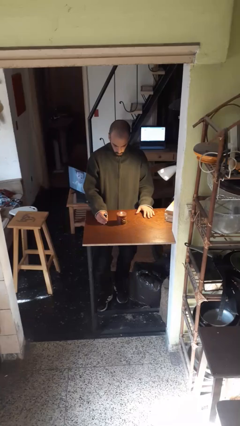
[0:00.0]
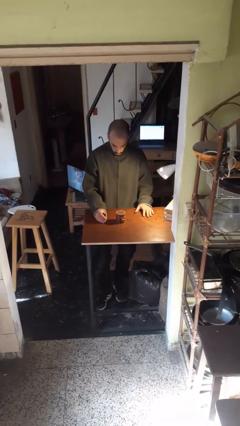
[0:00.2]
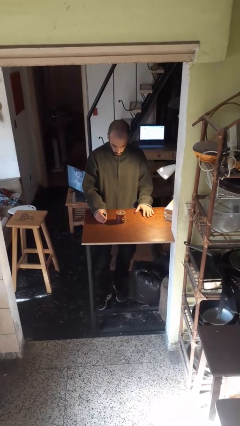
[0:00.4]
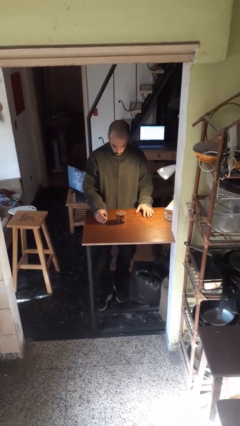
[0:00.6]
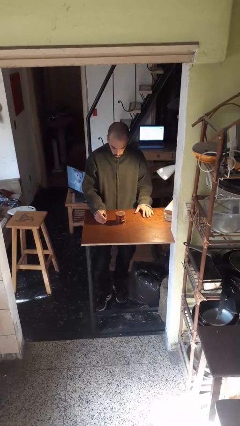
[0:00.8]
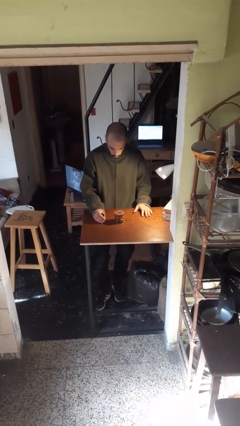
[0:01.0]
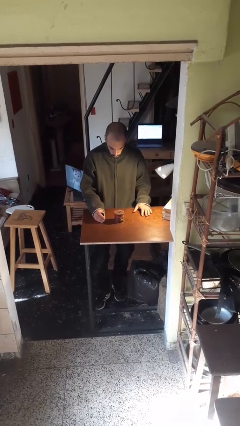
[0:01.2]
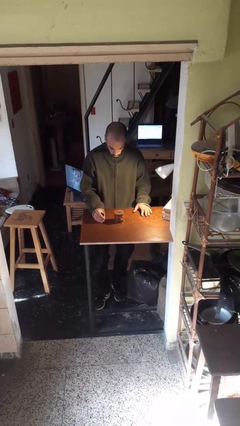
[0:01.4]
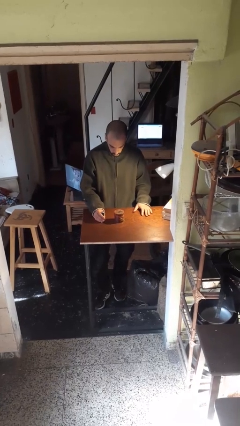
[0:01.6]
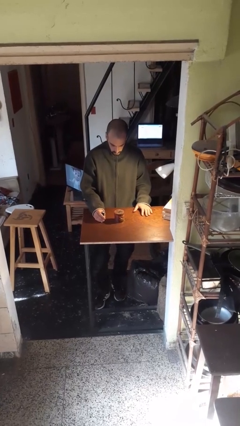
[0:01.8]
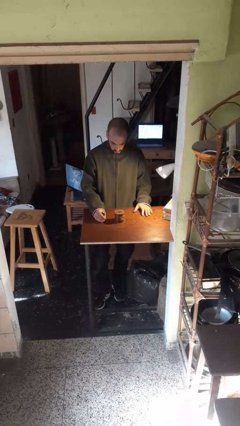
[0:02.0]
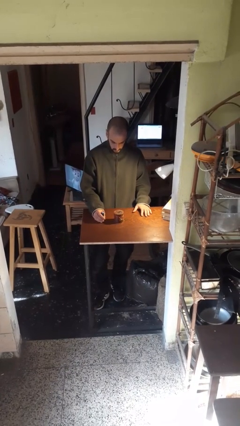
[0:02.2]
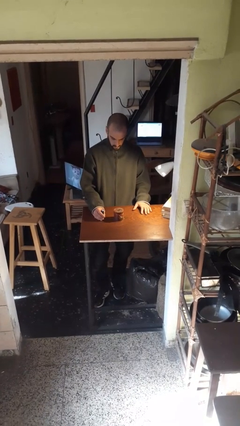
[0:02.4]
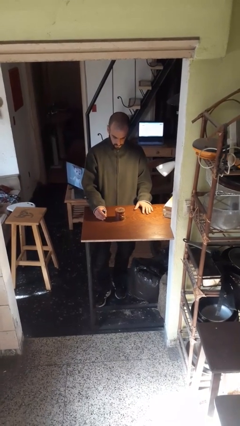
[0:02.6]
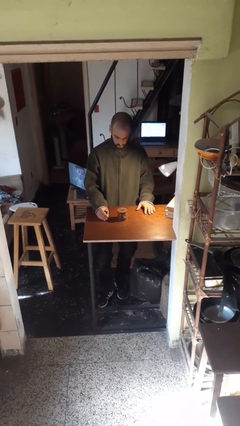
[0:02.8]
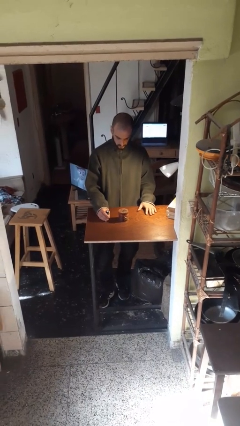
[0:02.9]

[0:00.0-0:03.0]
person extinguishes candle

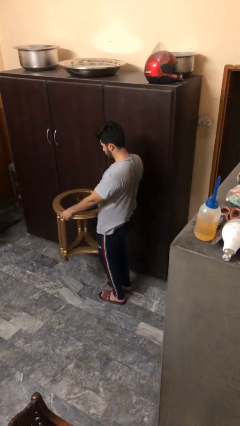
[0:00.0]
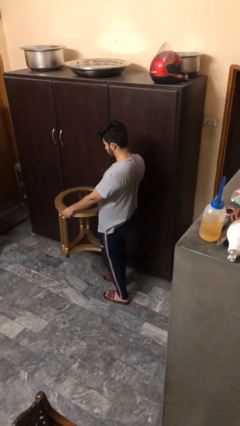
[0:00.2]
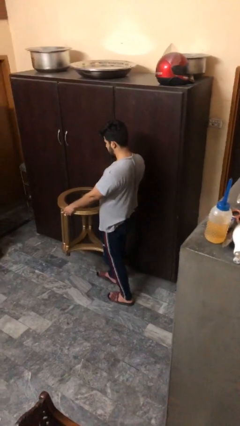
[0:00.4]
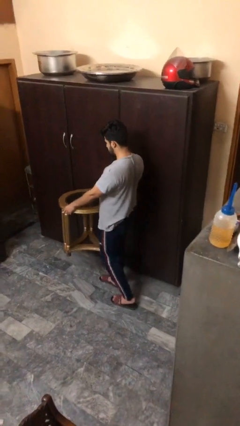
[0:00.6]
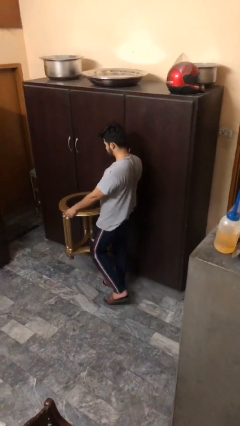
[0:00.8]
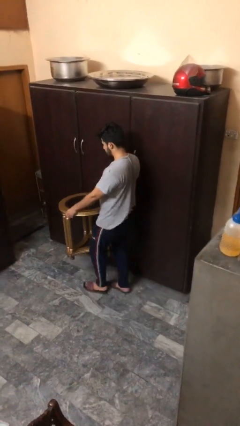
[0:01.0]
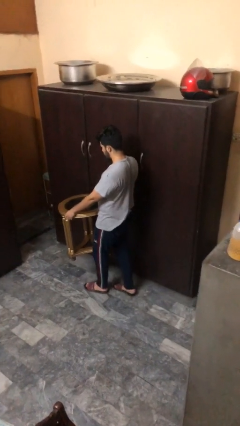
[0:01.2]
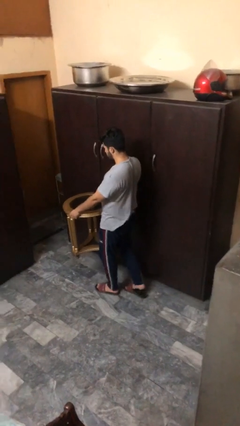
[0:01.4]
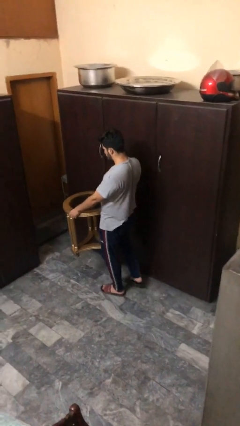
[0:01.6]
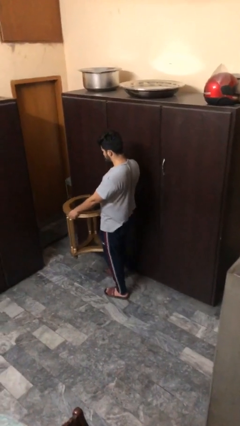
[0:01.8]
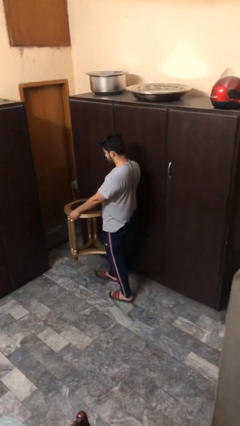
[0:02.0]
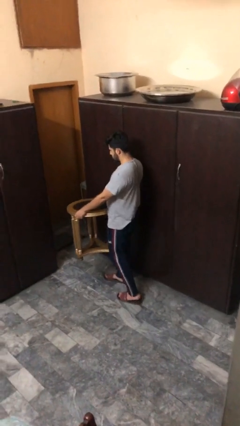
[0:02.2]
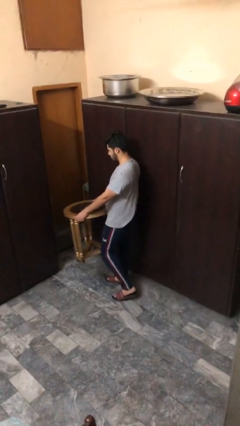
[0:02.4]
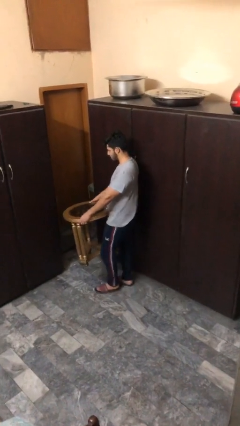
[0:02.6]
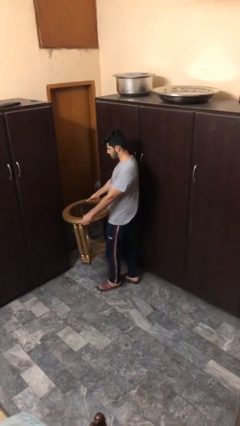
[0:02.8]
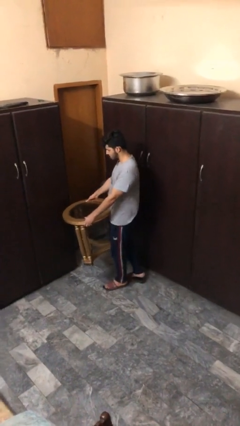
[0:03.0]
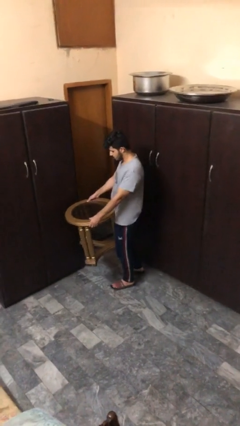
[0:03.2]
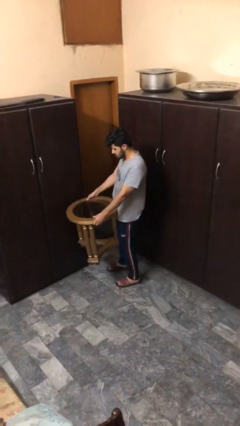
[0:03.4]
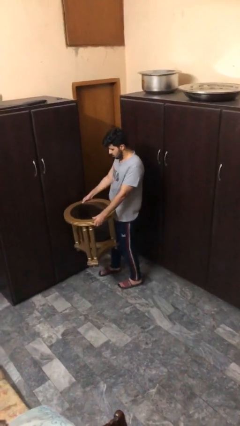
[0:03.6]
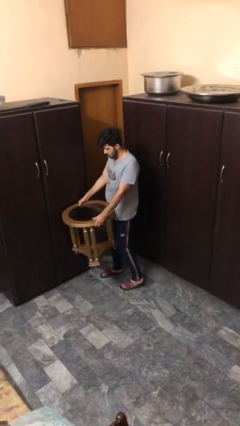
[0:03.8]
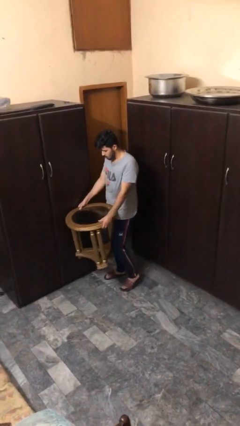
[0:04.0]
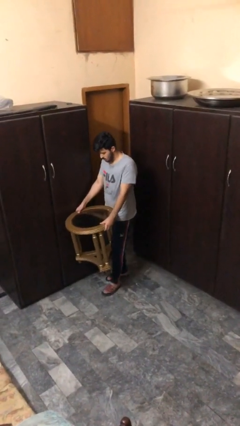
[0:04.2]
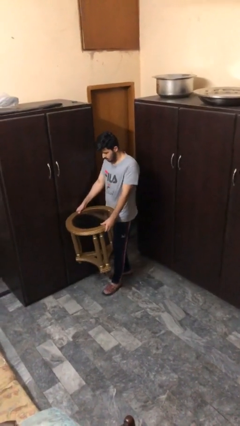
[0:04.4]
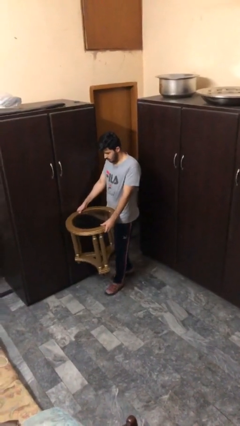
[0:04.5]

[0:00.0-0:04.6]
person carries furniture

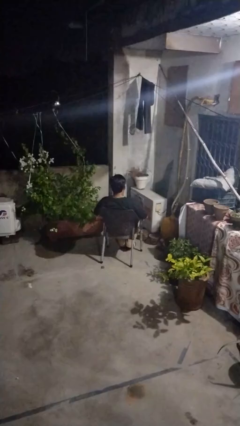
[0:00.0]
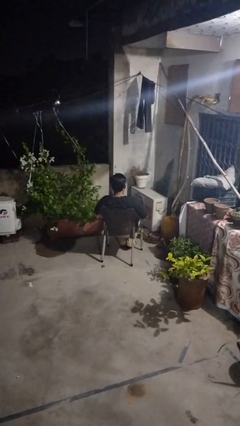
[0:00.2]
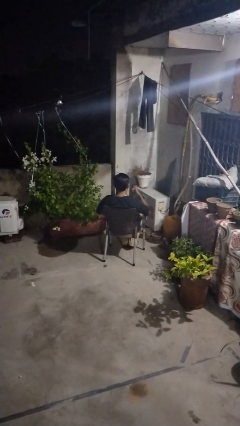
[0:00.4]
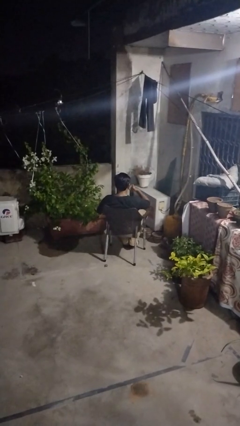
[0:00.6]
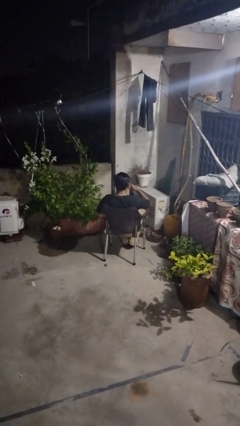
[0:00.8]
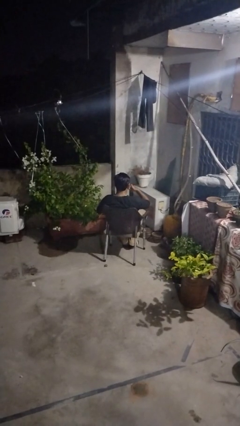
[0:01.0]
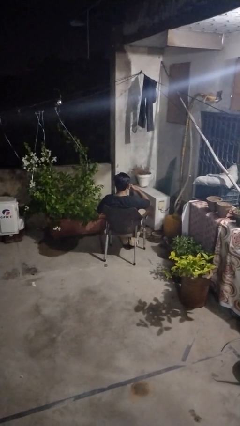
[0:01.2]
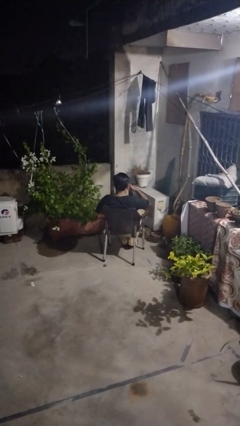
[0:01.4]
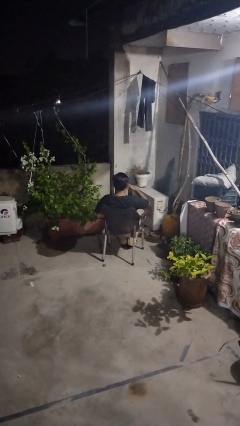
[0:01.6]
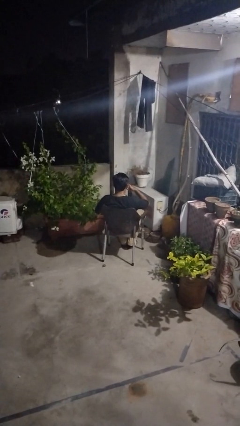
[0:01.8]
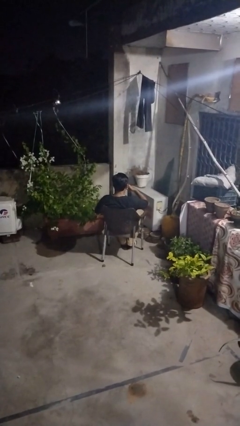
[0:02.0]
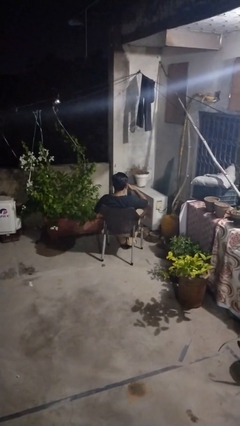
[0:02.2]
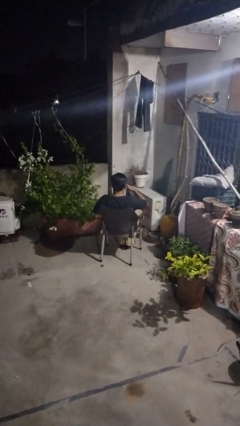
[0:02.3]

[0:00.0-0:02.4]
person gestures call me

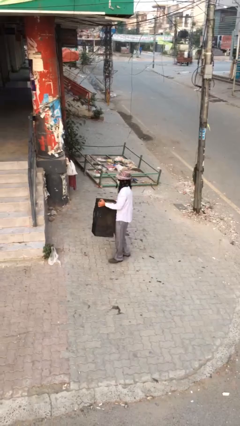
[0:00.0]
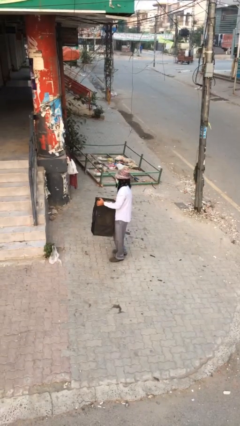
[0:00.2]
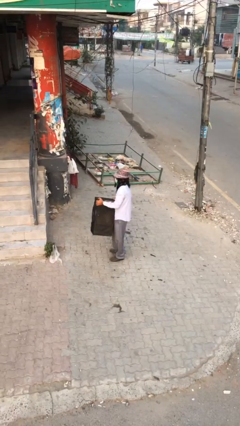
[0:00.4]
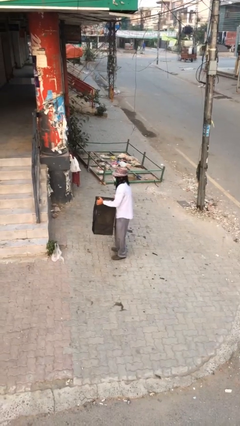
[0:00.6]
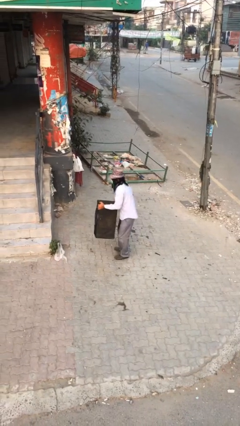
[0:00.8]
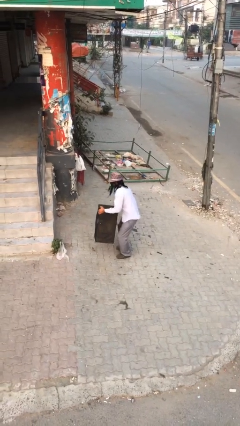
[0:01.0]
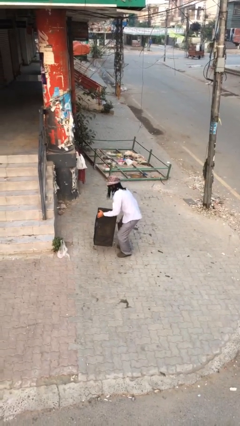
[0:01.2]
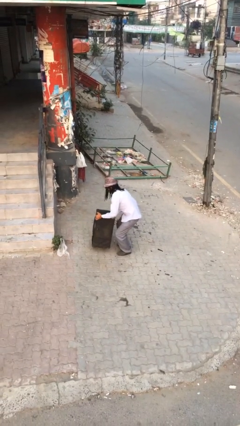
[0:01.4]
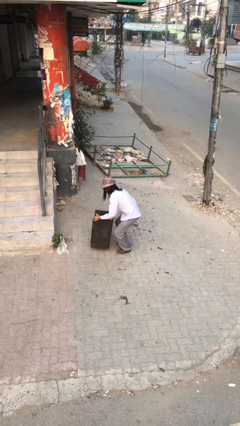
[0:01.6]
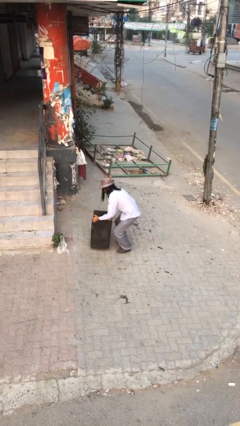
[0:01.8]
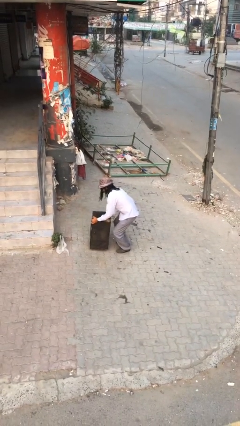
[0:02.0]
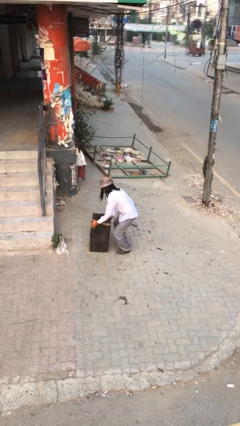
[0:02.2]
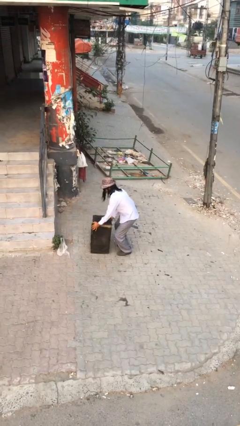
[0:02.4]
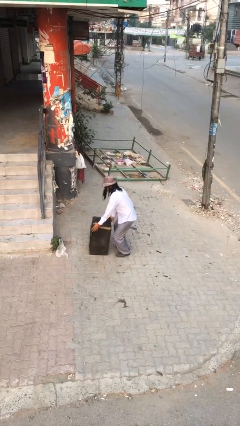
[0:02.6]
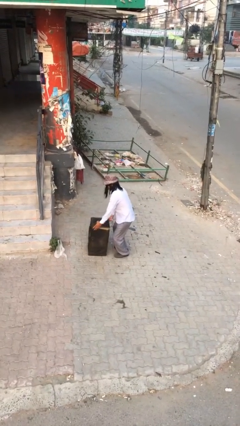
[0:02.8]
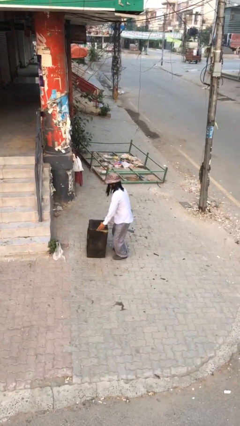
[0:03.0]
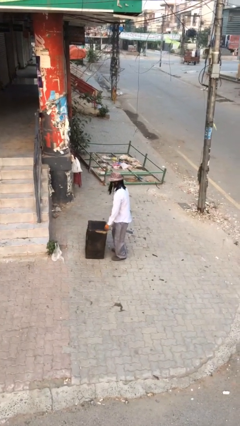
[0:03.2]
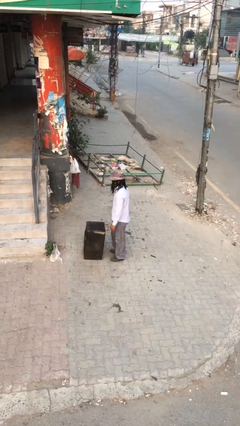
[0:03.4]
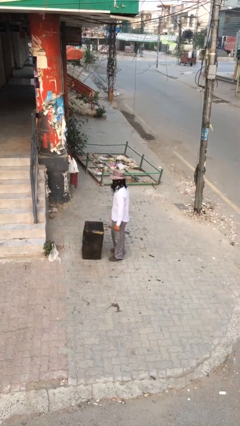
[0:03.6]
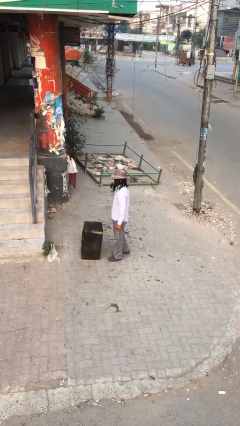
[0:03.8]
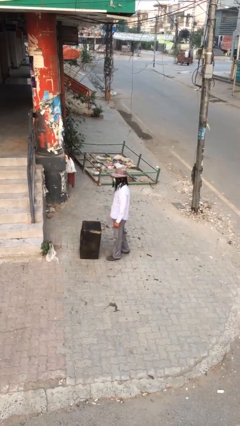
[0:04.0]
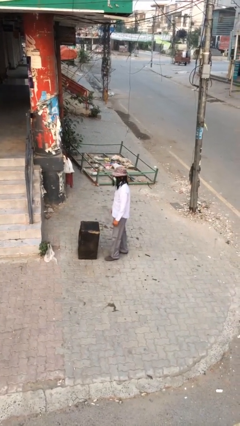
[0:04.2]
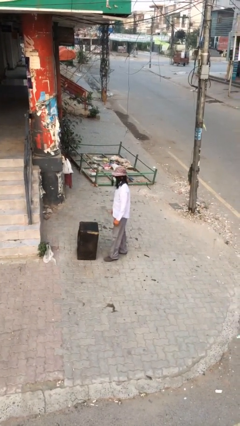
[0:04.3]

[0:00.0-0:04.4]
person puts down object on floor

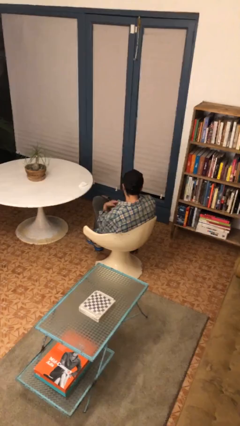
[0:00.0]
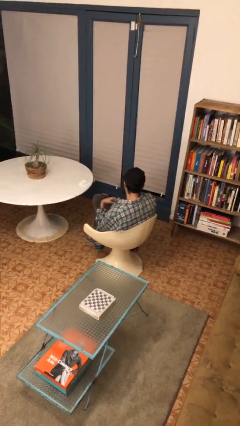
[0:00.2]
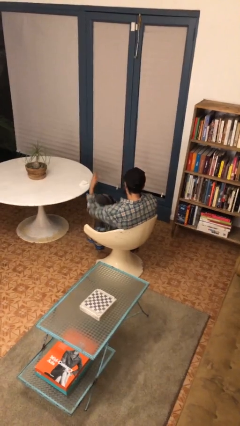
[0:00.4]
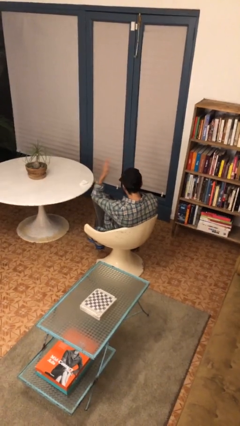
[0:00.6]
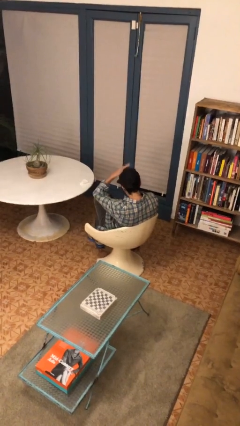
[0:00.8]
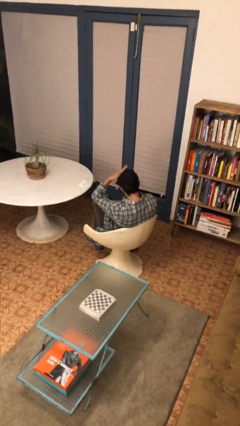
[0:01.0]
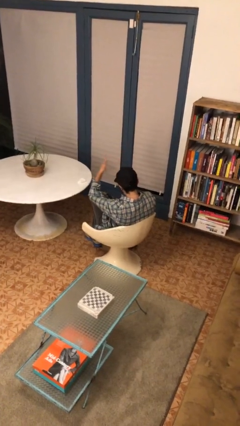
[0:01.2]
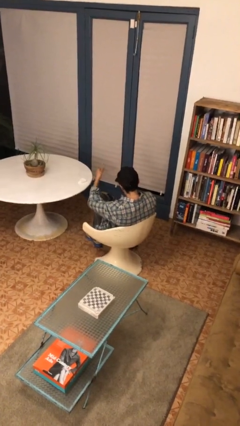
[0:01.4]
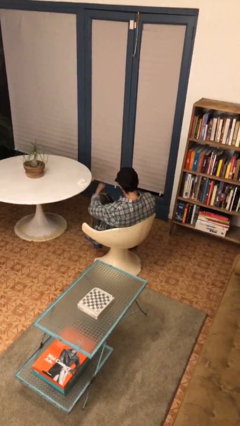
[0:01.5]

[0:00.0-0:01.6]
person pats head

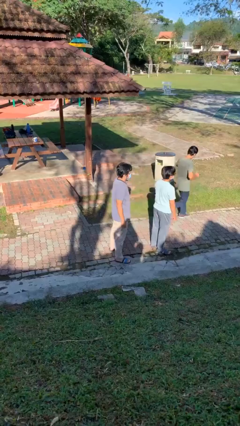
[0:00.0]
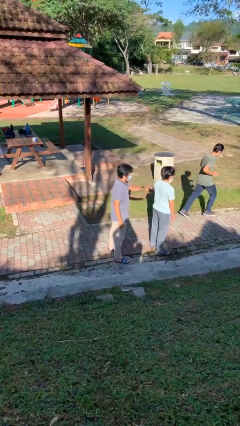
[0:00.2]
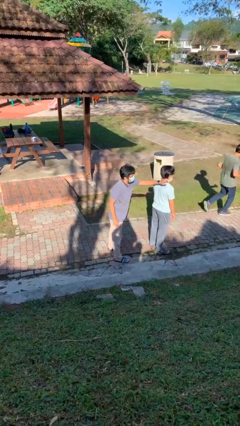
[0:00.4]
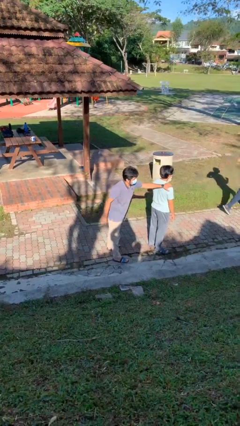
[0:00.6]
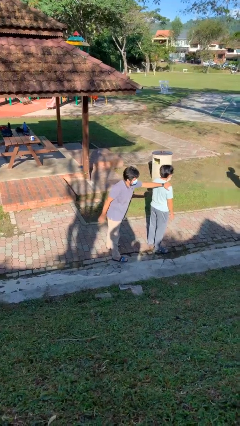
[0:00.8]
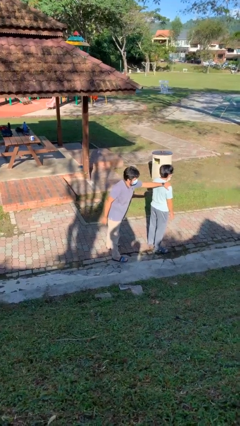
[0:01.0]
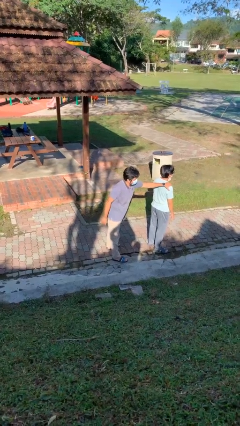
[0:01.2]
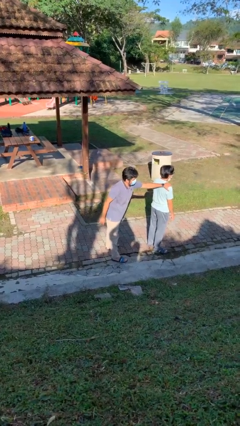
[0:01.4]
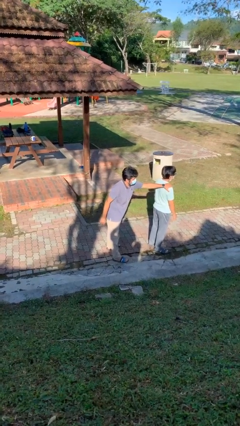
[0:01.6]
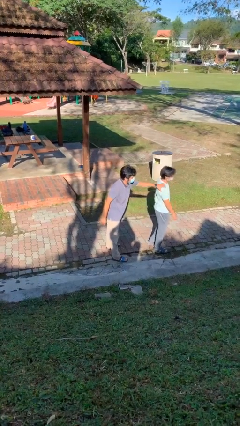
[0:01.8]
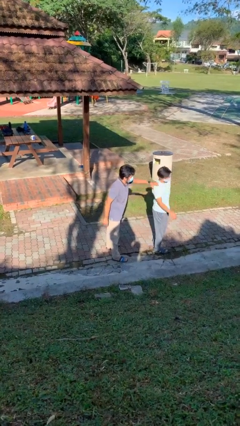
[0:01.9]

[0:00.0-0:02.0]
person grabs person by shoulder
